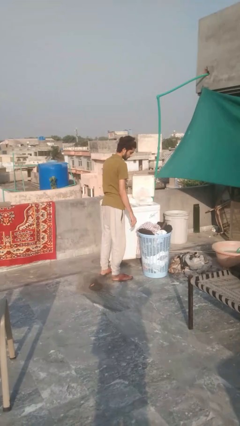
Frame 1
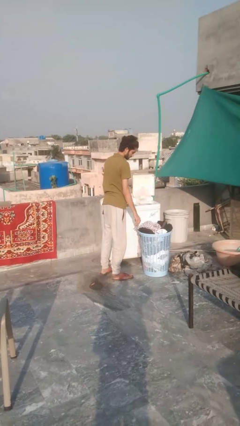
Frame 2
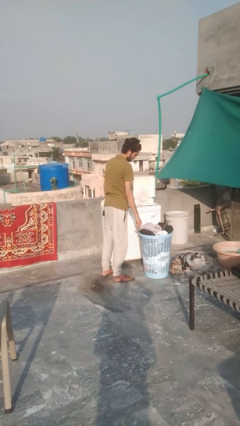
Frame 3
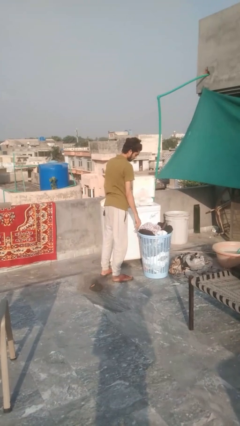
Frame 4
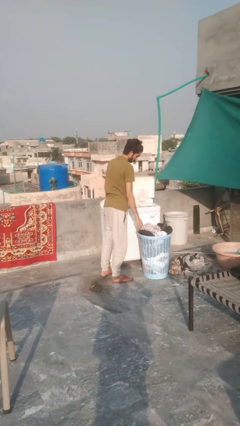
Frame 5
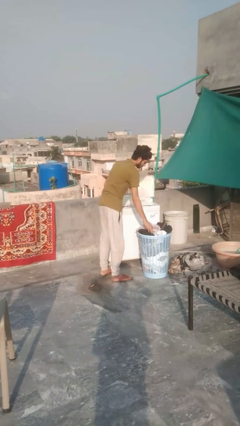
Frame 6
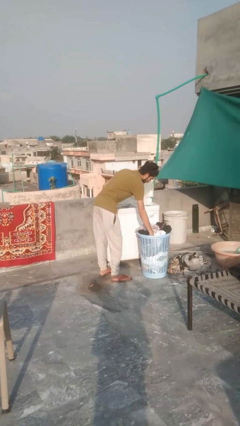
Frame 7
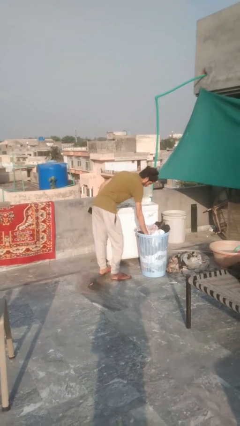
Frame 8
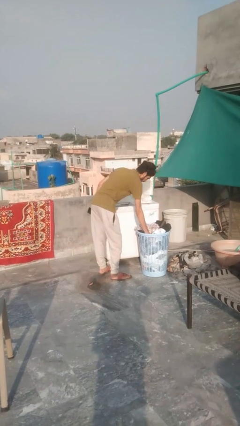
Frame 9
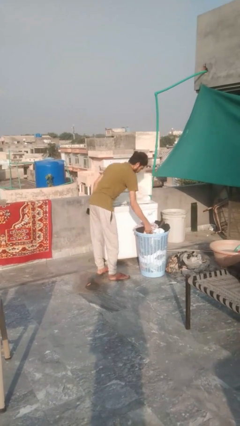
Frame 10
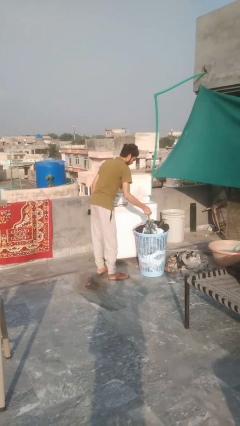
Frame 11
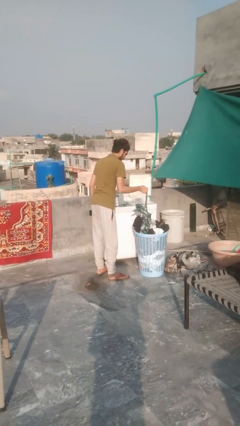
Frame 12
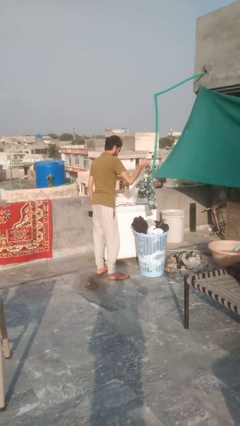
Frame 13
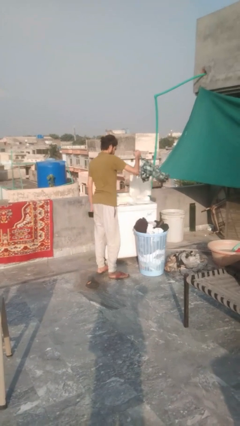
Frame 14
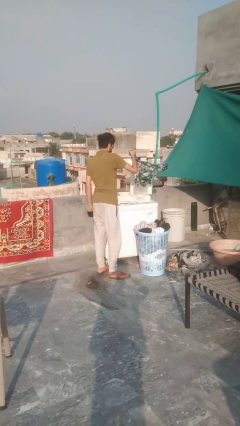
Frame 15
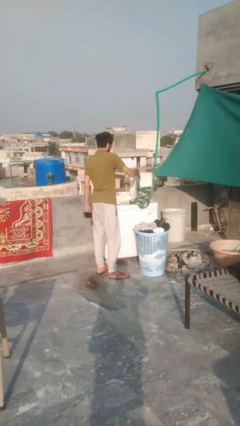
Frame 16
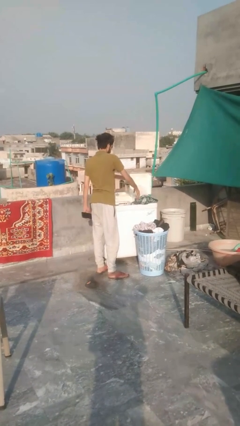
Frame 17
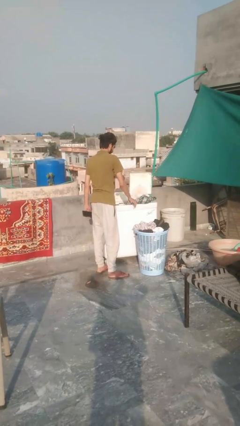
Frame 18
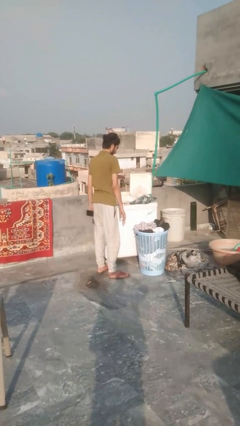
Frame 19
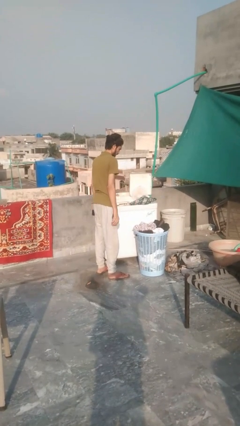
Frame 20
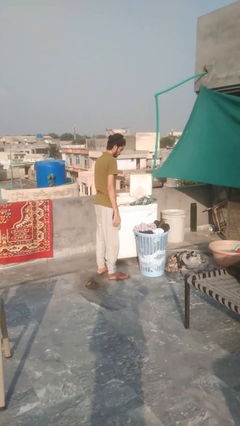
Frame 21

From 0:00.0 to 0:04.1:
person loads clotheswasher

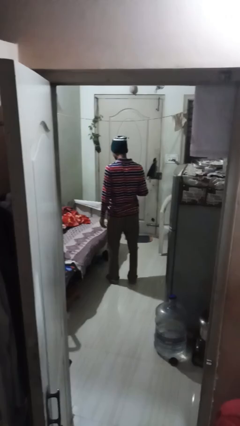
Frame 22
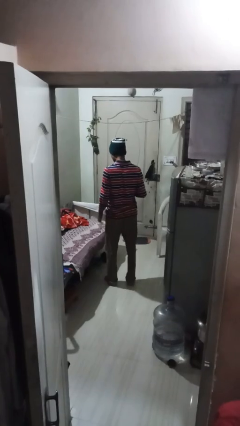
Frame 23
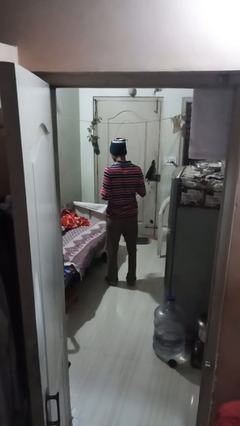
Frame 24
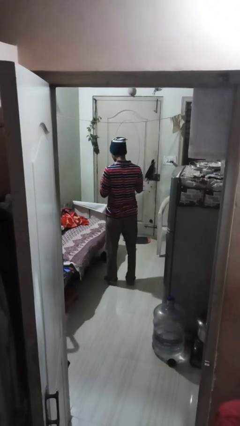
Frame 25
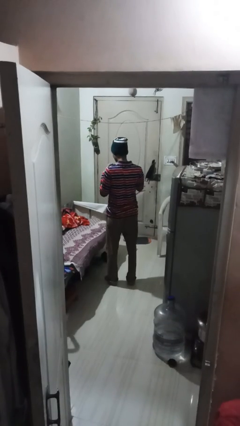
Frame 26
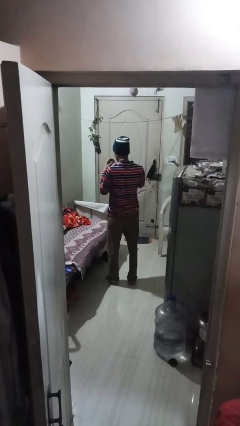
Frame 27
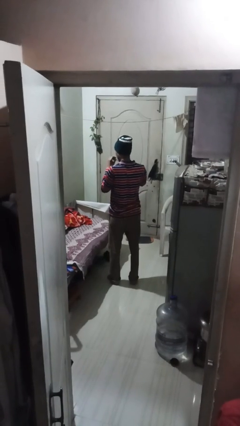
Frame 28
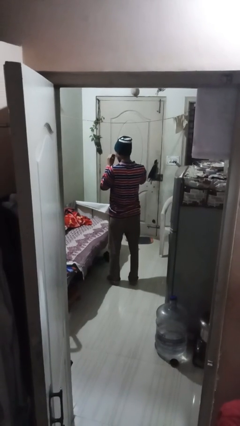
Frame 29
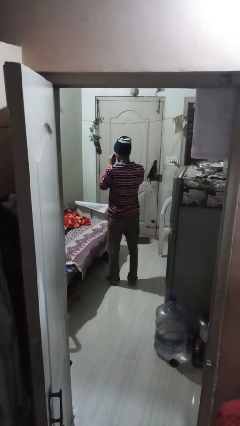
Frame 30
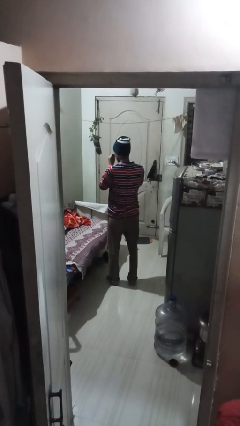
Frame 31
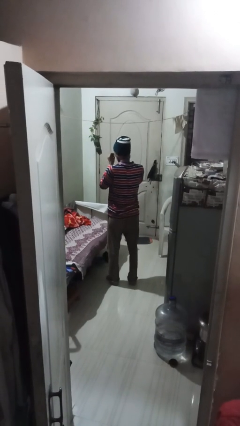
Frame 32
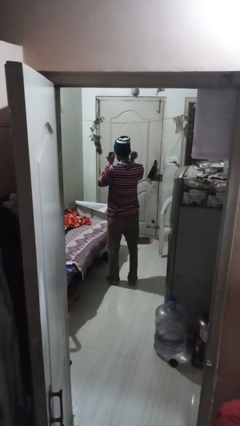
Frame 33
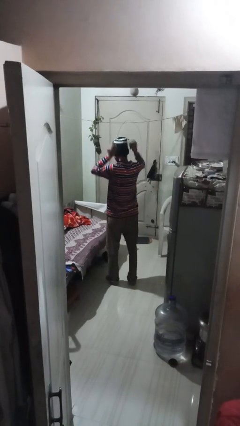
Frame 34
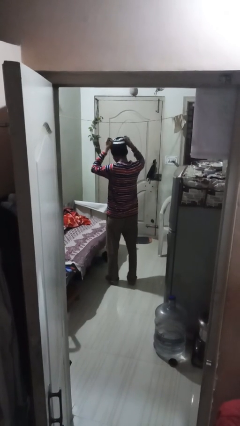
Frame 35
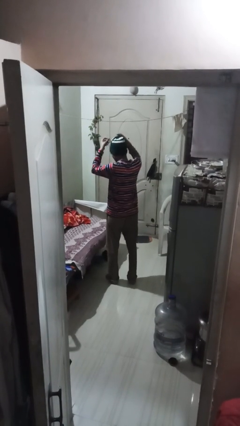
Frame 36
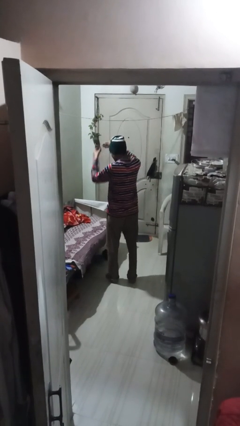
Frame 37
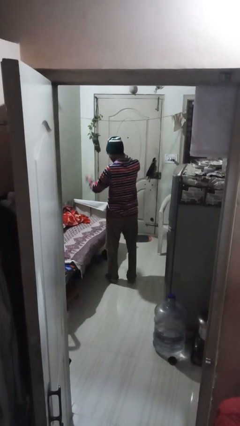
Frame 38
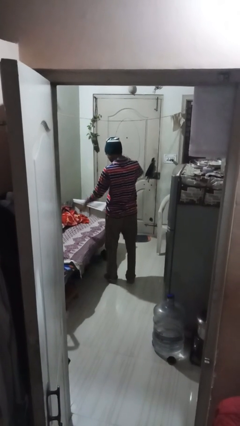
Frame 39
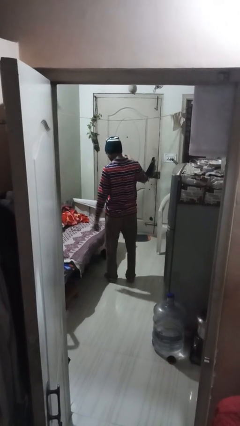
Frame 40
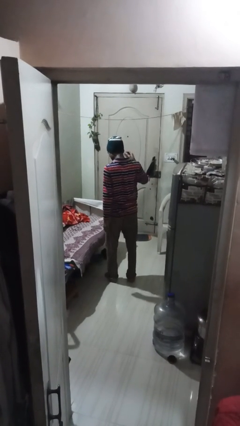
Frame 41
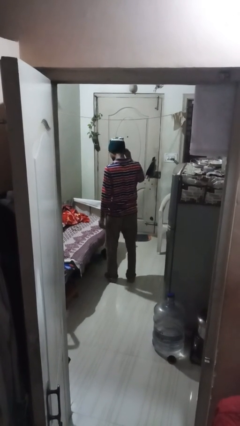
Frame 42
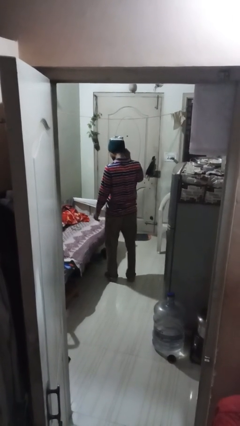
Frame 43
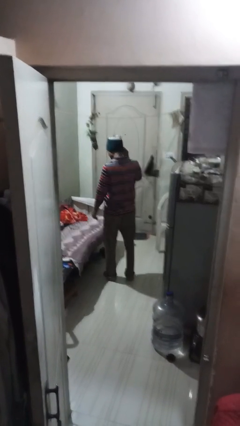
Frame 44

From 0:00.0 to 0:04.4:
person takes off necklace

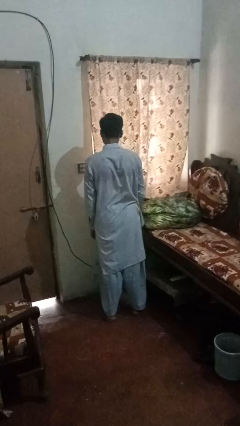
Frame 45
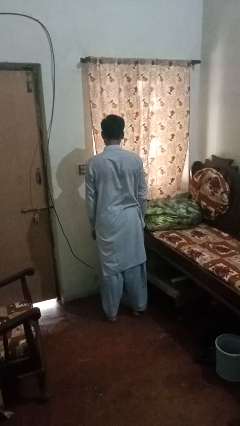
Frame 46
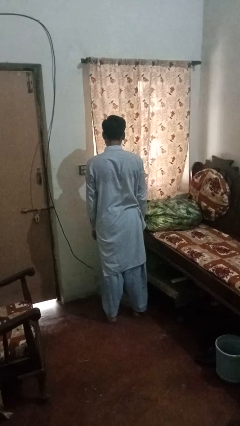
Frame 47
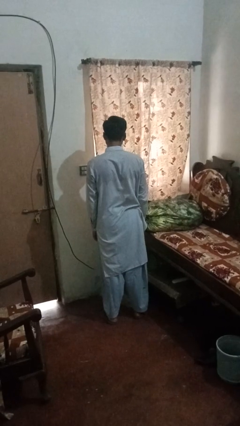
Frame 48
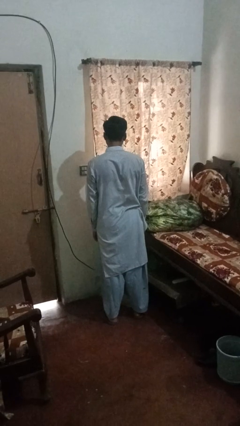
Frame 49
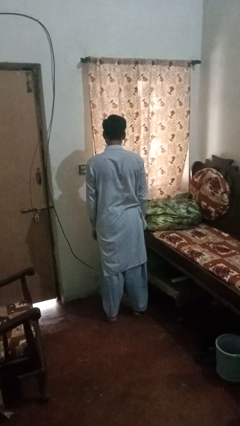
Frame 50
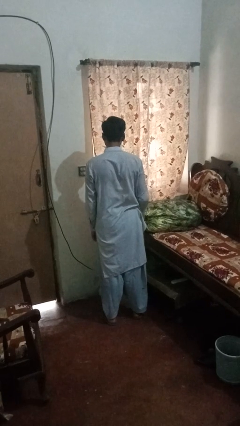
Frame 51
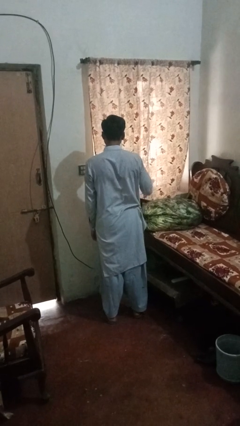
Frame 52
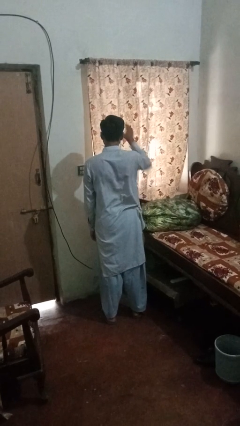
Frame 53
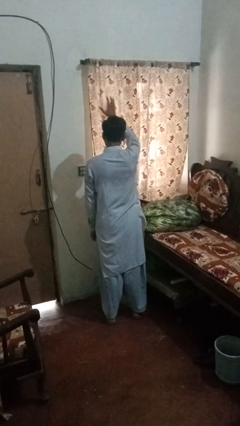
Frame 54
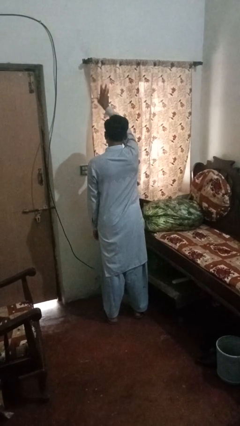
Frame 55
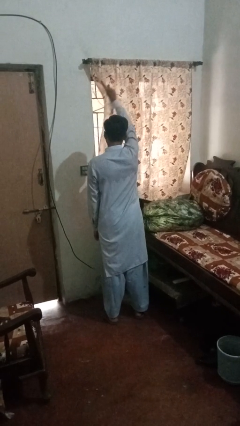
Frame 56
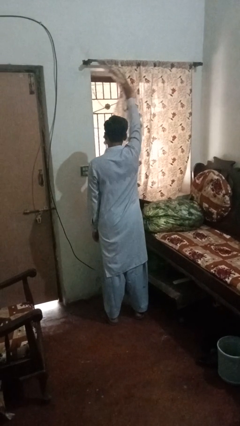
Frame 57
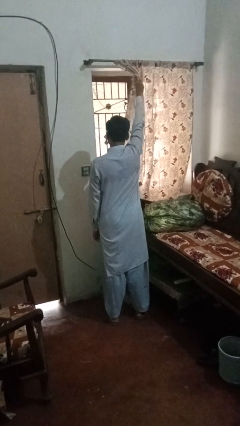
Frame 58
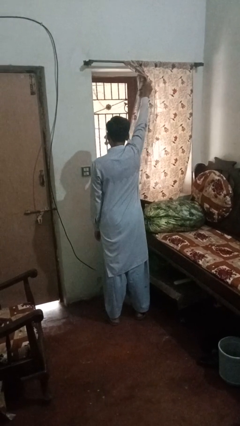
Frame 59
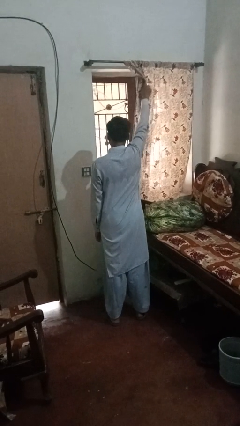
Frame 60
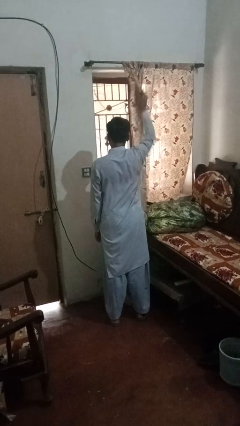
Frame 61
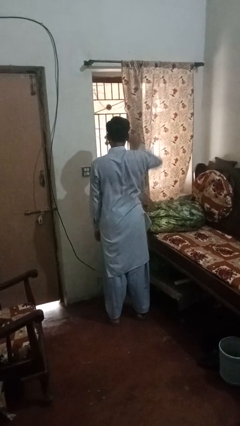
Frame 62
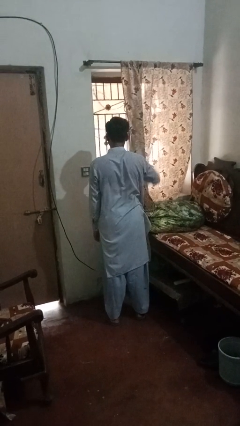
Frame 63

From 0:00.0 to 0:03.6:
person opens curtains

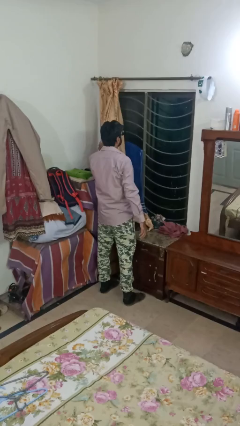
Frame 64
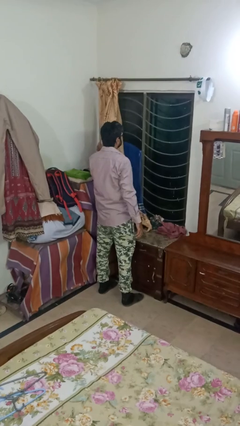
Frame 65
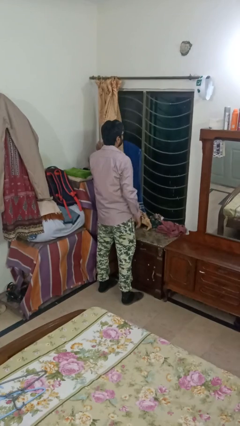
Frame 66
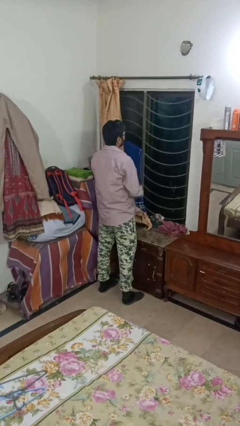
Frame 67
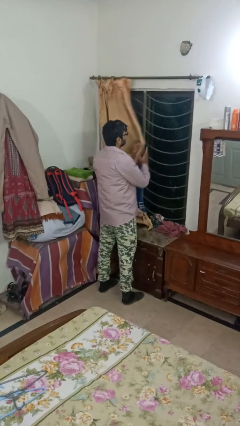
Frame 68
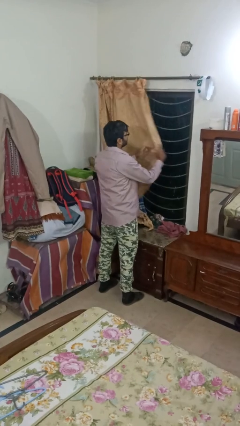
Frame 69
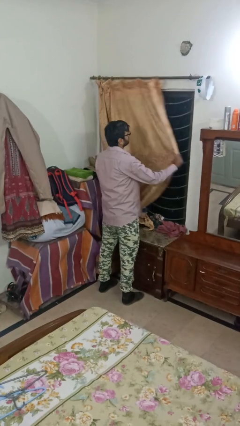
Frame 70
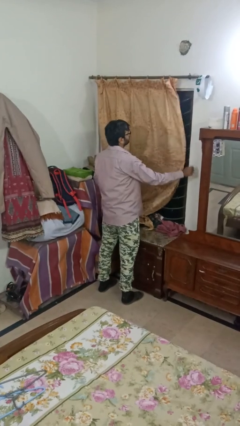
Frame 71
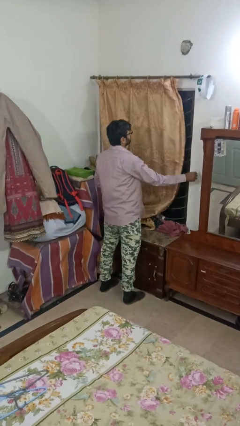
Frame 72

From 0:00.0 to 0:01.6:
person closes curtains

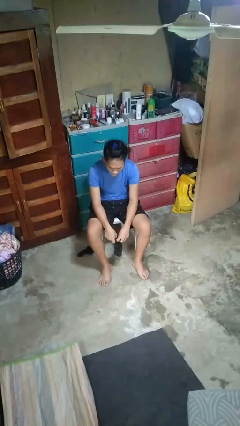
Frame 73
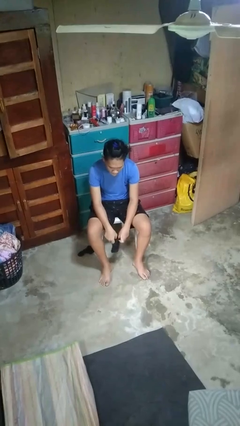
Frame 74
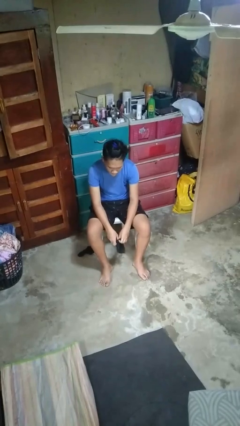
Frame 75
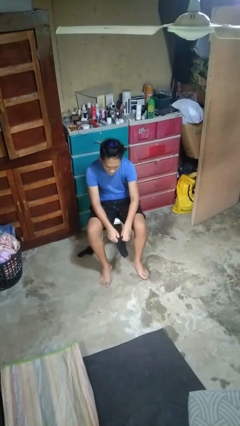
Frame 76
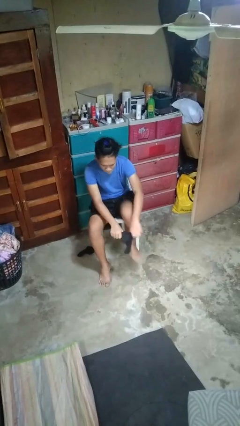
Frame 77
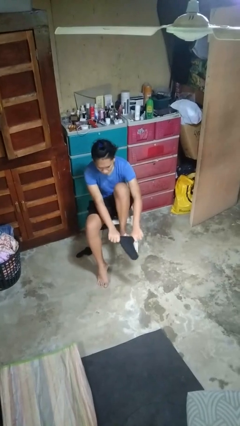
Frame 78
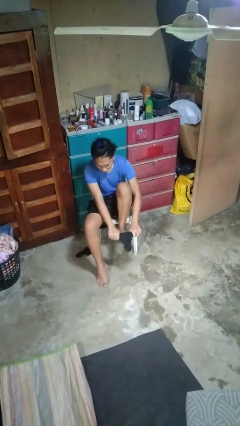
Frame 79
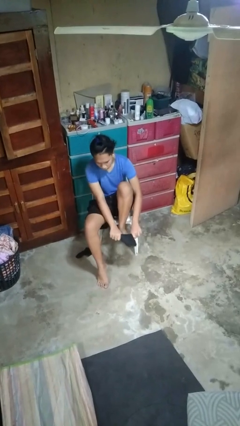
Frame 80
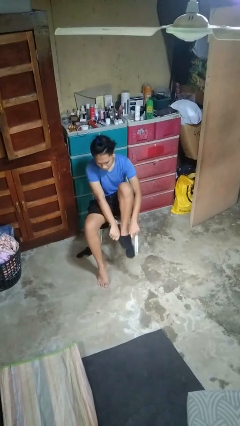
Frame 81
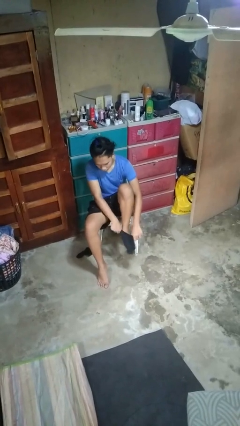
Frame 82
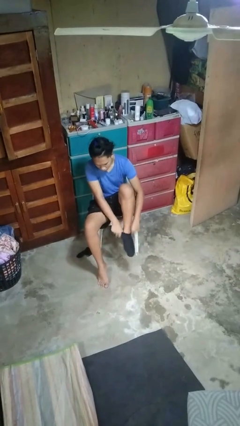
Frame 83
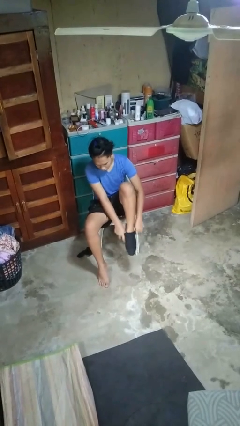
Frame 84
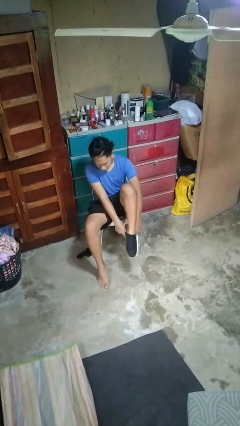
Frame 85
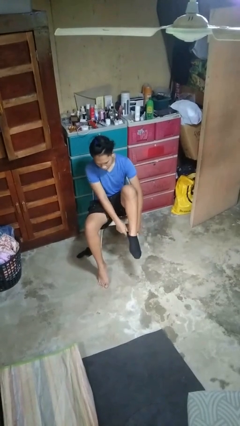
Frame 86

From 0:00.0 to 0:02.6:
person puts on socks

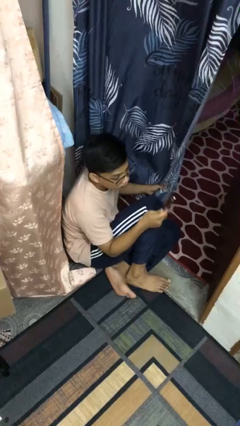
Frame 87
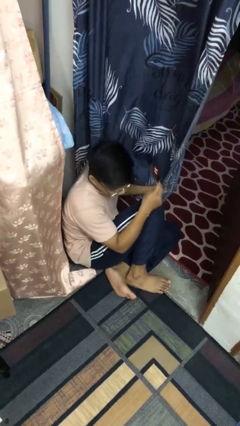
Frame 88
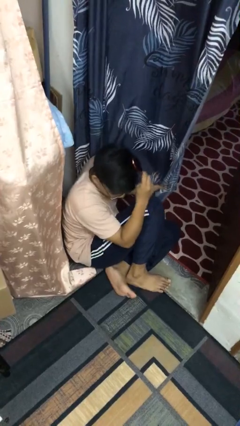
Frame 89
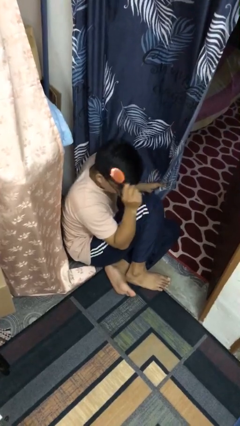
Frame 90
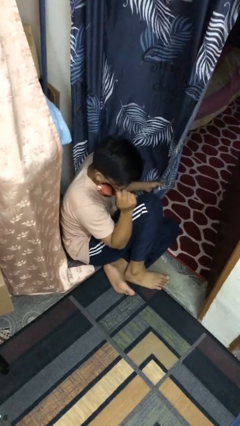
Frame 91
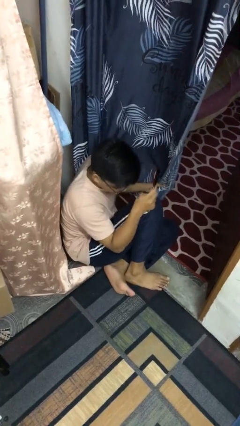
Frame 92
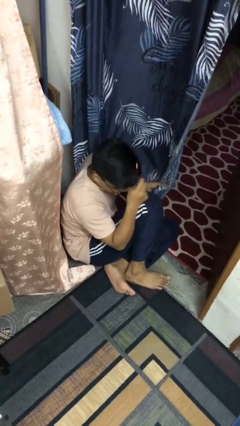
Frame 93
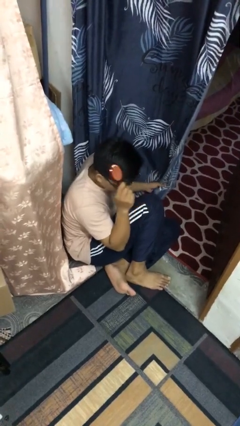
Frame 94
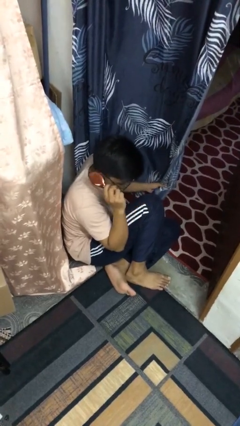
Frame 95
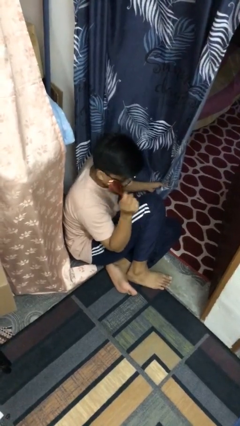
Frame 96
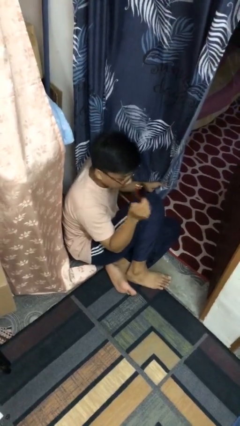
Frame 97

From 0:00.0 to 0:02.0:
person brushes hair
